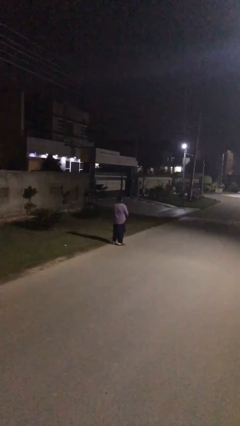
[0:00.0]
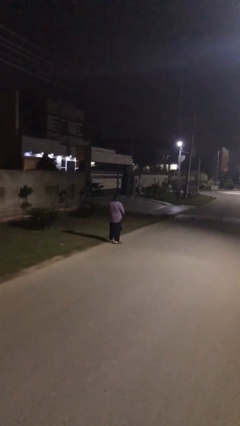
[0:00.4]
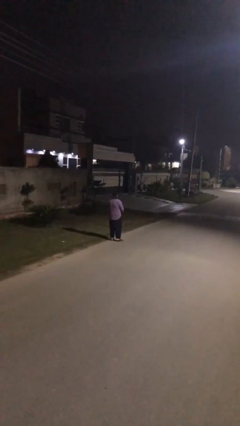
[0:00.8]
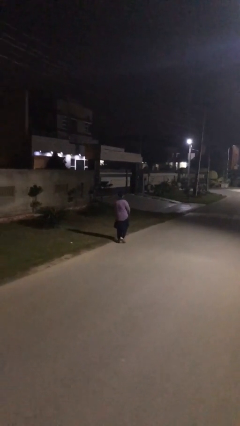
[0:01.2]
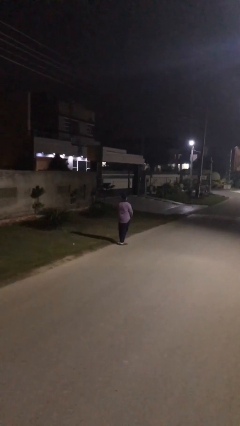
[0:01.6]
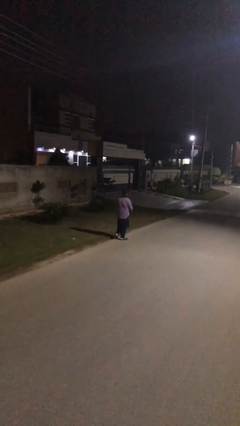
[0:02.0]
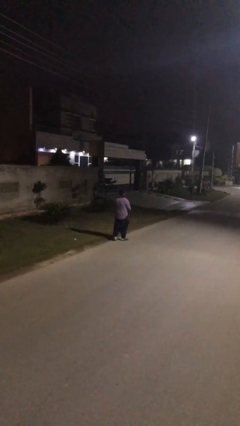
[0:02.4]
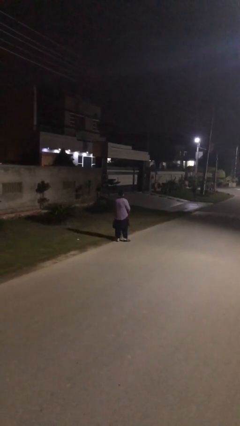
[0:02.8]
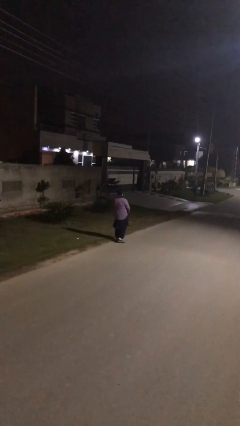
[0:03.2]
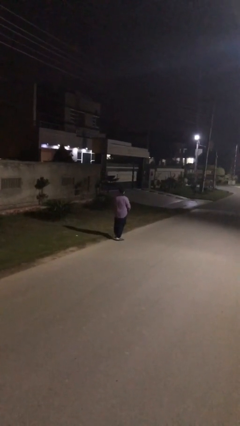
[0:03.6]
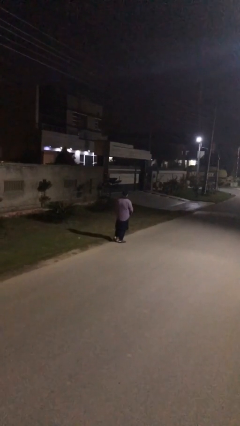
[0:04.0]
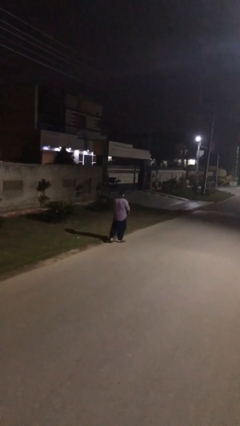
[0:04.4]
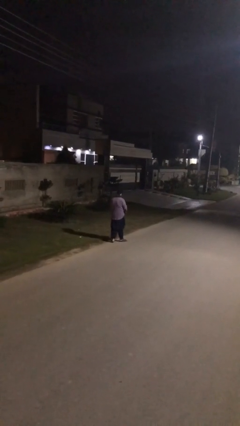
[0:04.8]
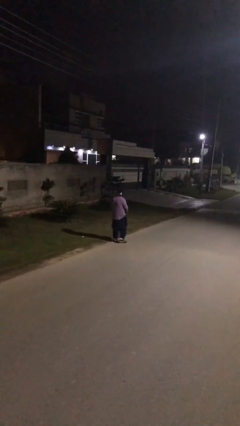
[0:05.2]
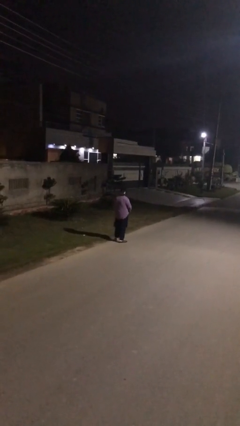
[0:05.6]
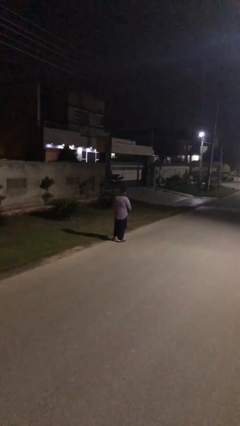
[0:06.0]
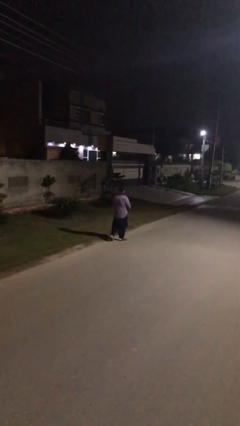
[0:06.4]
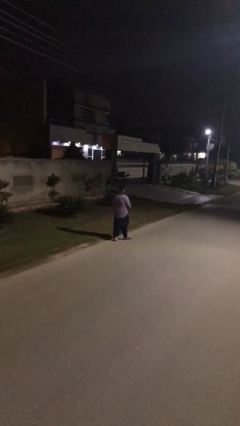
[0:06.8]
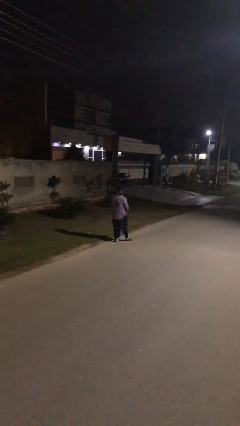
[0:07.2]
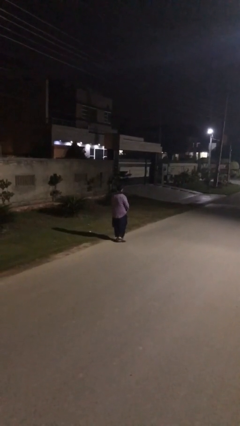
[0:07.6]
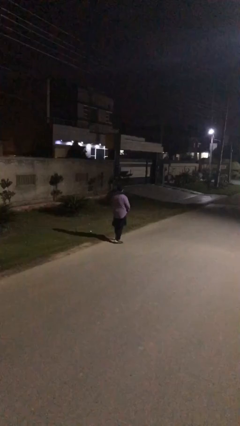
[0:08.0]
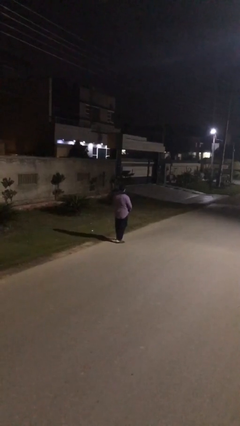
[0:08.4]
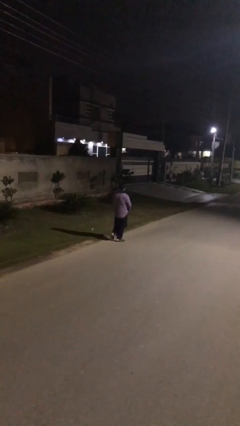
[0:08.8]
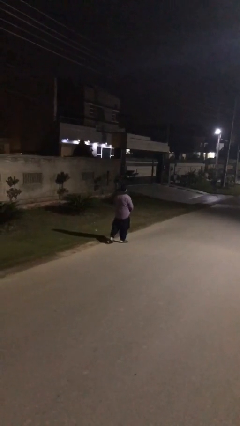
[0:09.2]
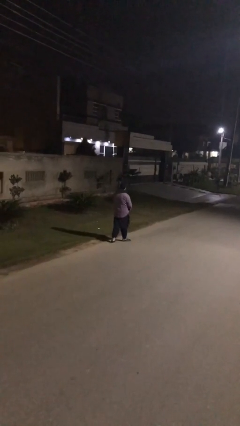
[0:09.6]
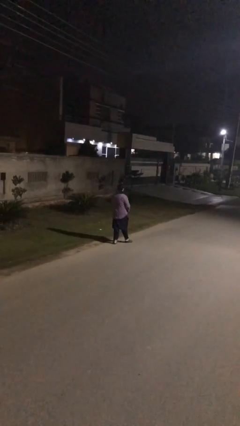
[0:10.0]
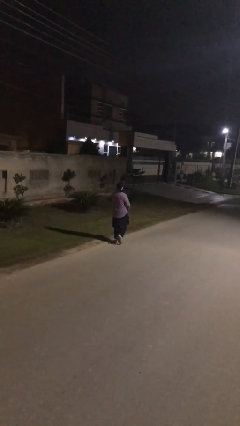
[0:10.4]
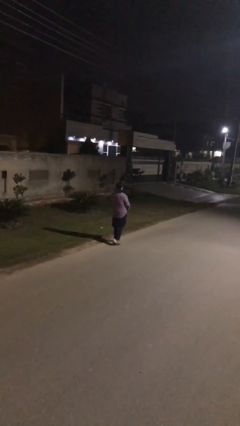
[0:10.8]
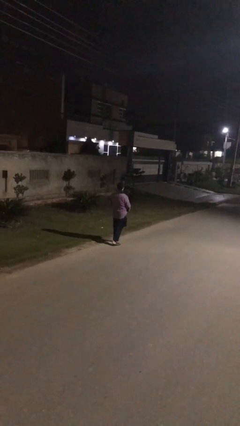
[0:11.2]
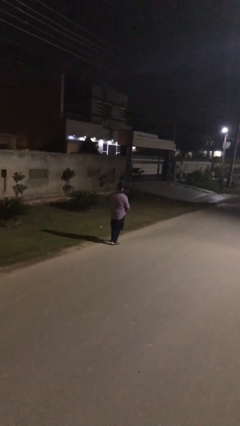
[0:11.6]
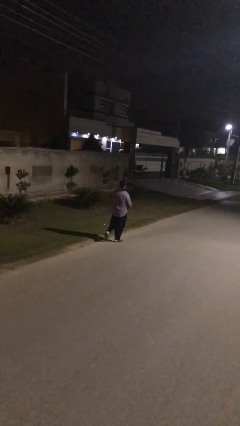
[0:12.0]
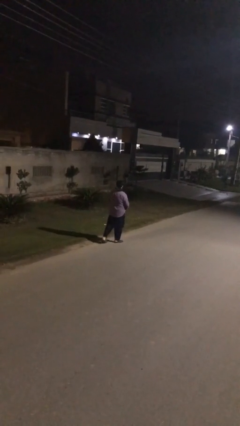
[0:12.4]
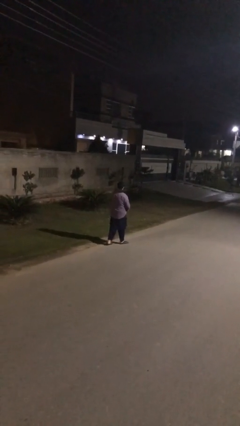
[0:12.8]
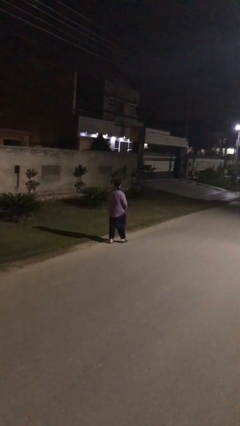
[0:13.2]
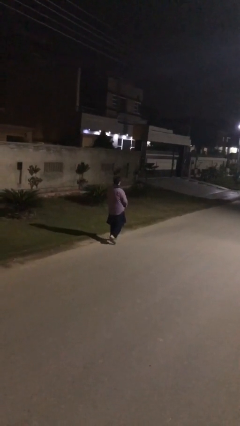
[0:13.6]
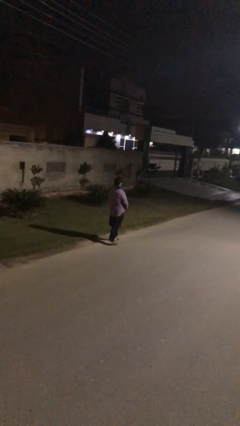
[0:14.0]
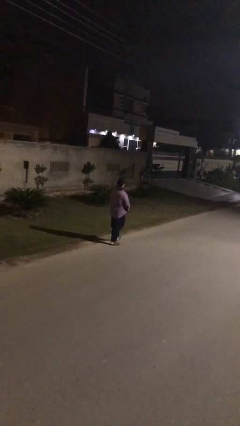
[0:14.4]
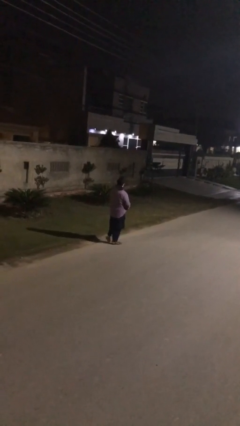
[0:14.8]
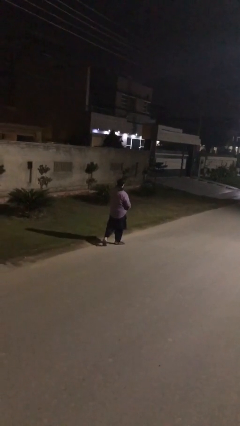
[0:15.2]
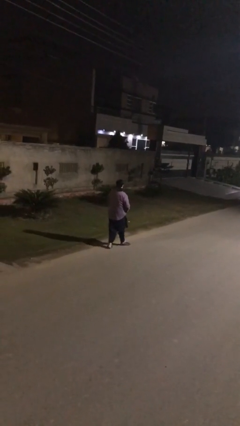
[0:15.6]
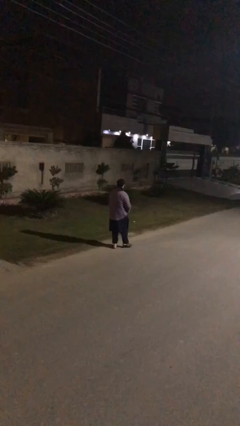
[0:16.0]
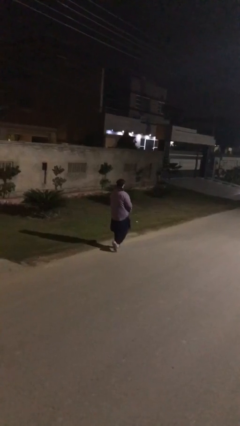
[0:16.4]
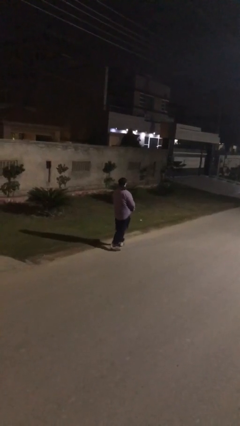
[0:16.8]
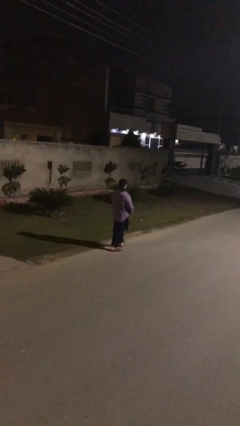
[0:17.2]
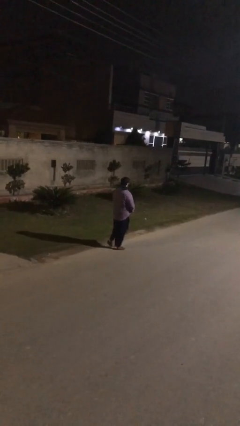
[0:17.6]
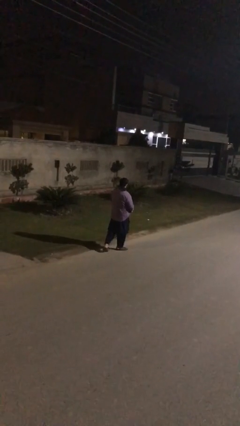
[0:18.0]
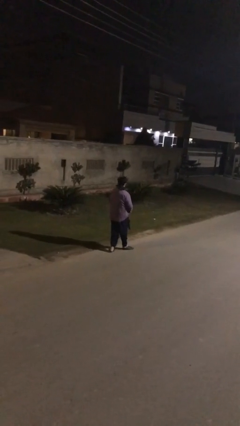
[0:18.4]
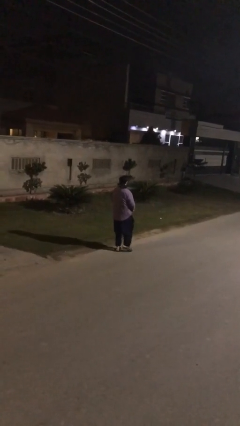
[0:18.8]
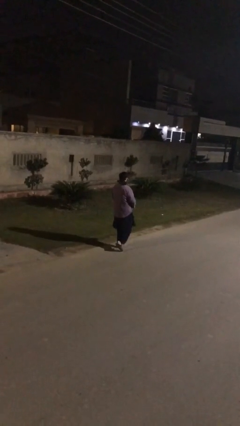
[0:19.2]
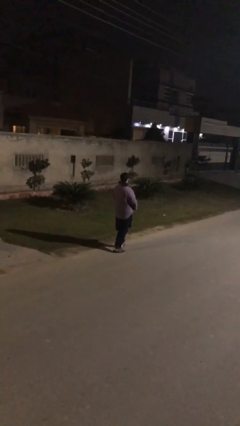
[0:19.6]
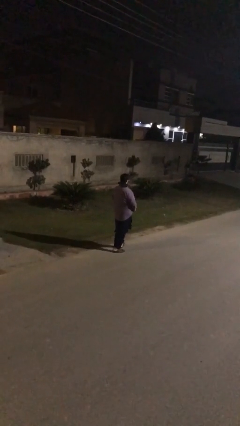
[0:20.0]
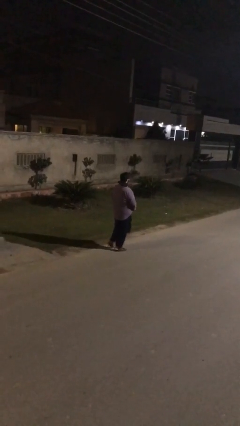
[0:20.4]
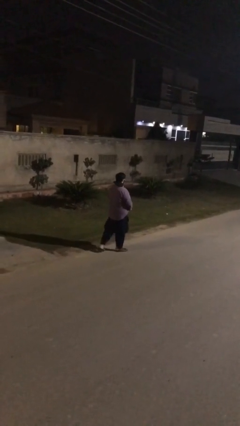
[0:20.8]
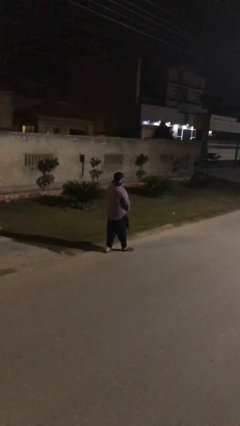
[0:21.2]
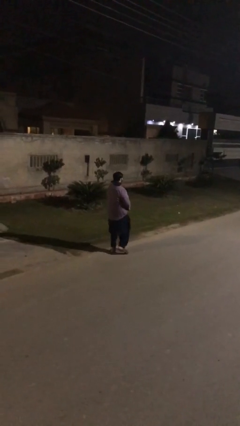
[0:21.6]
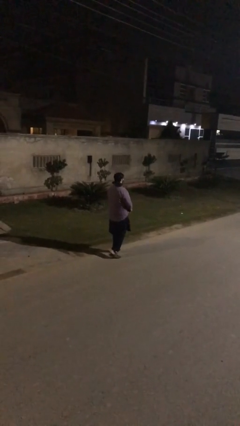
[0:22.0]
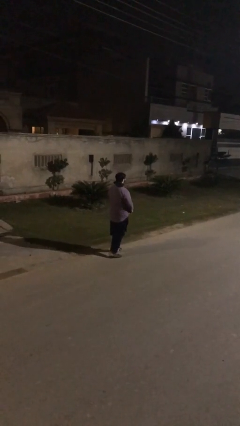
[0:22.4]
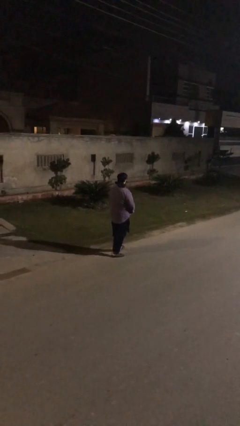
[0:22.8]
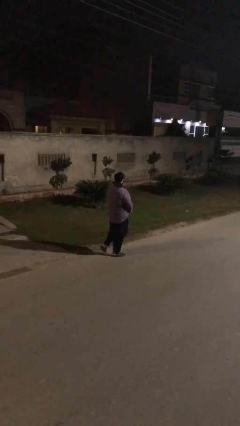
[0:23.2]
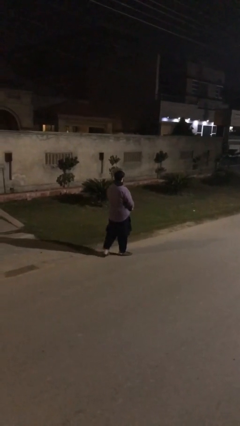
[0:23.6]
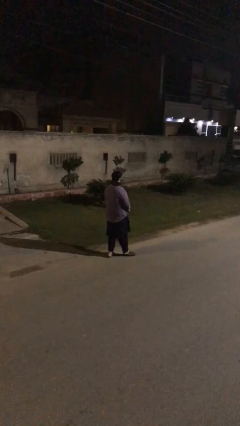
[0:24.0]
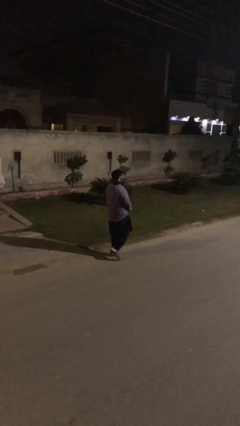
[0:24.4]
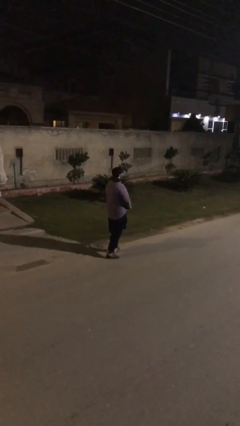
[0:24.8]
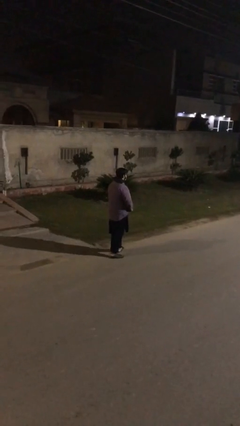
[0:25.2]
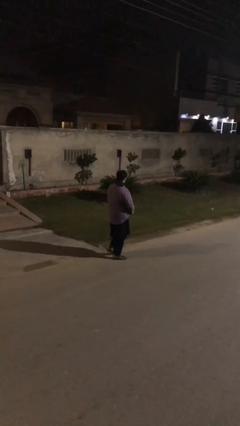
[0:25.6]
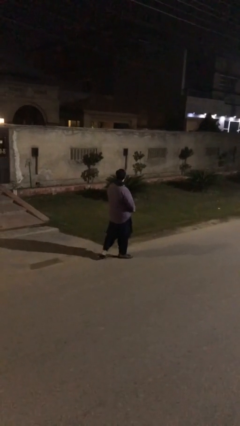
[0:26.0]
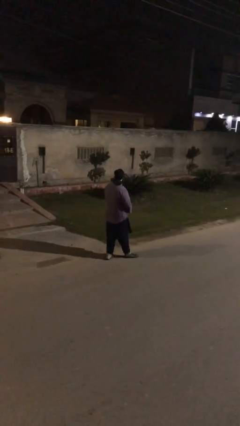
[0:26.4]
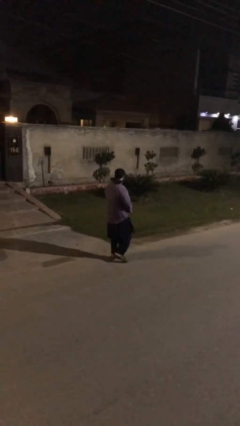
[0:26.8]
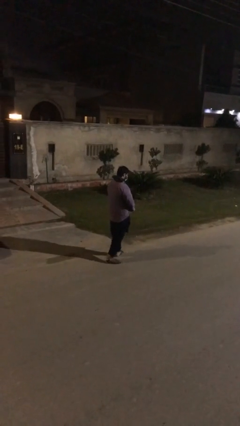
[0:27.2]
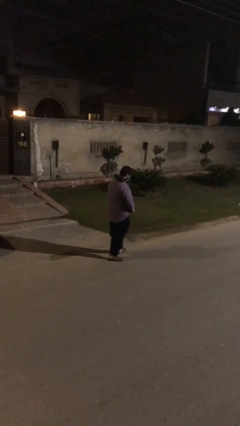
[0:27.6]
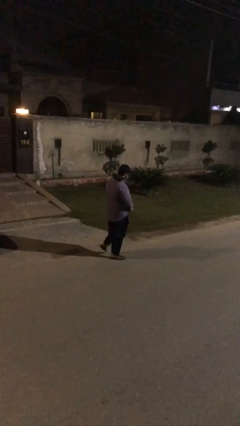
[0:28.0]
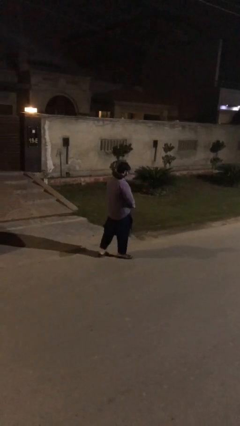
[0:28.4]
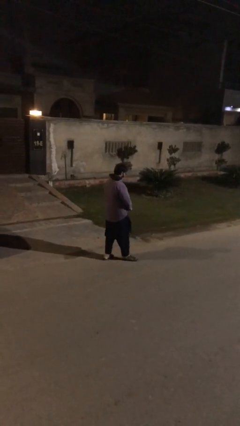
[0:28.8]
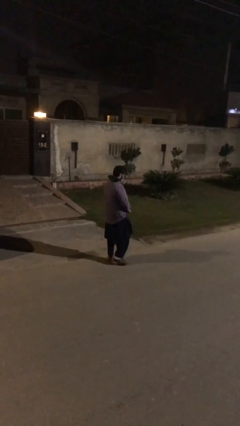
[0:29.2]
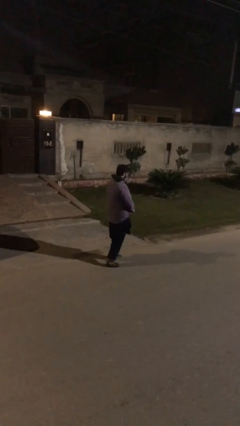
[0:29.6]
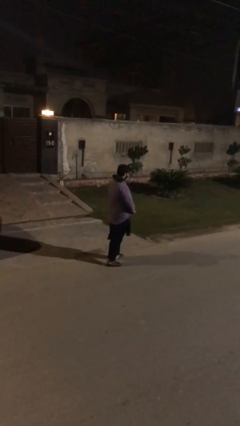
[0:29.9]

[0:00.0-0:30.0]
person walks

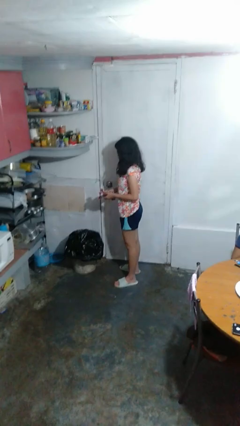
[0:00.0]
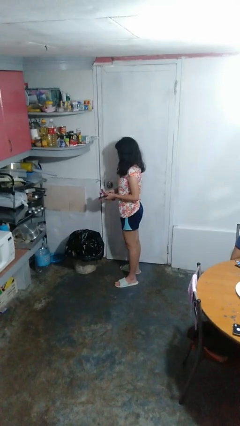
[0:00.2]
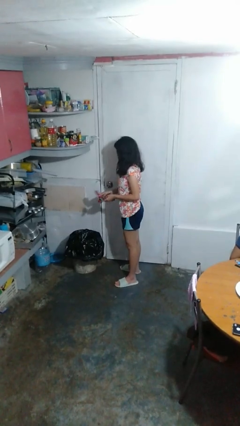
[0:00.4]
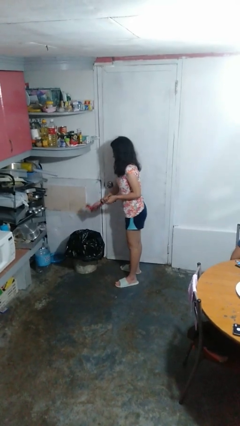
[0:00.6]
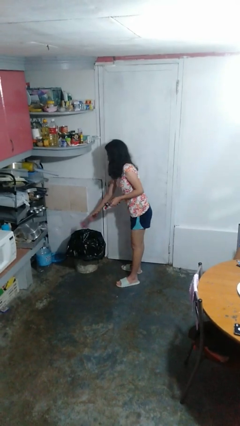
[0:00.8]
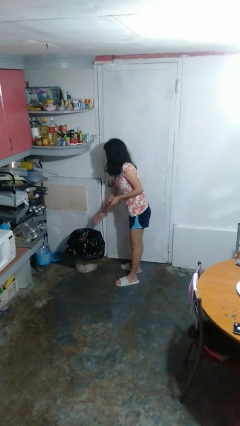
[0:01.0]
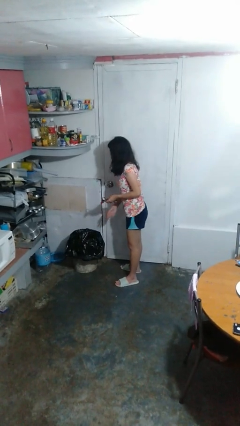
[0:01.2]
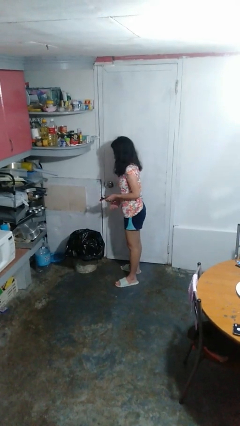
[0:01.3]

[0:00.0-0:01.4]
person discards trash

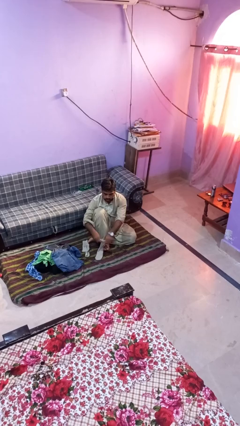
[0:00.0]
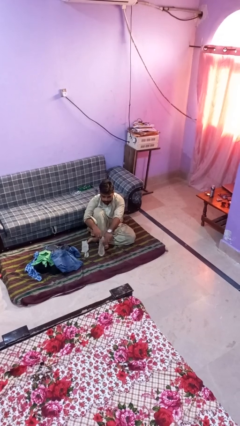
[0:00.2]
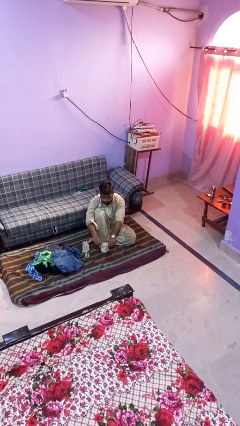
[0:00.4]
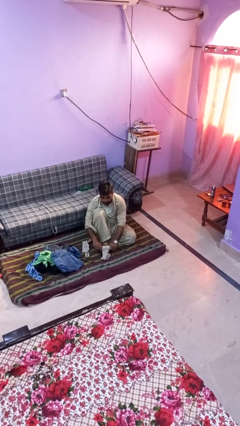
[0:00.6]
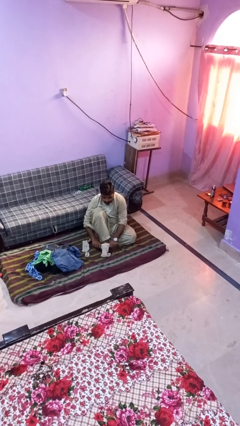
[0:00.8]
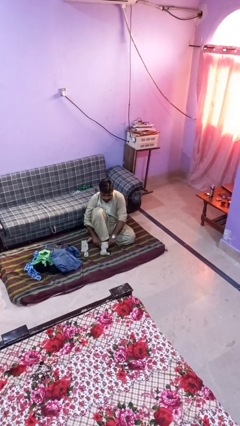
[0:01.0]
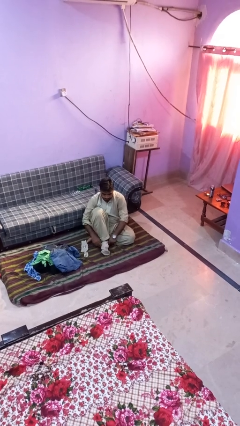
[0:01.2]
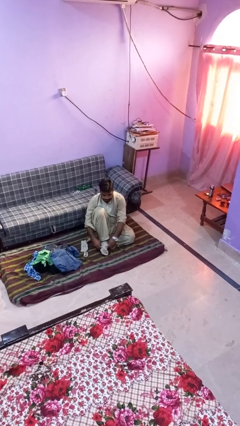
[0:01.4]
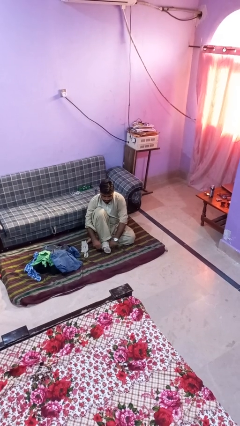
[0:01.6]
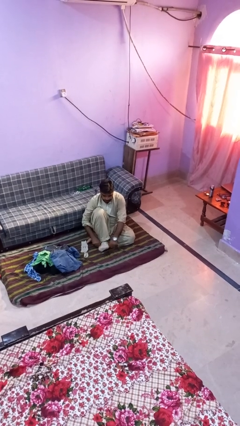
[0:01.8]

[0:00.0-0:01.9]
person puts on socks
